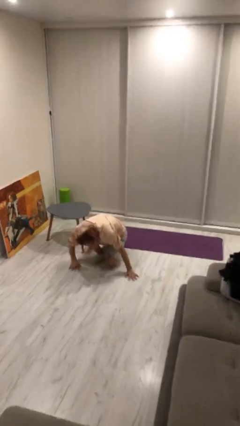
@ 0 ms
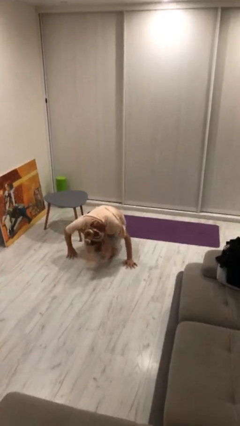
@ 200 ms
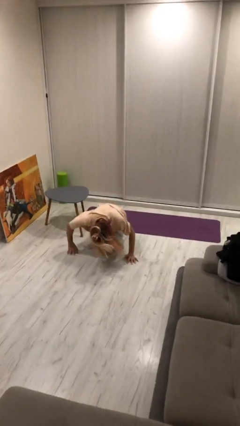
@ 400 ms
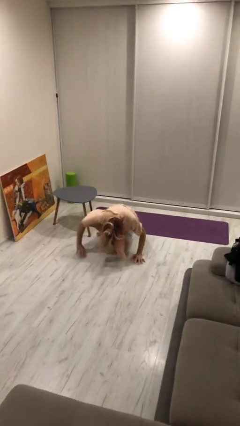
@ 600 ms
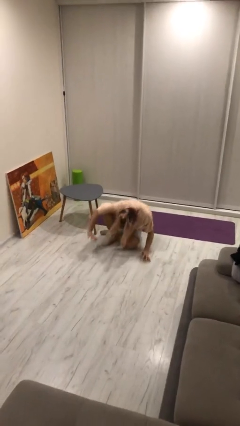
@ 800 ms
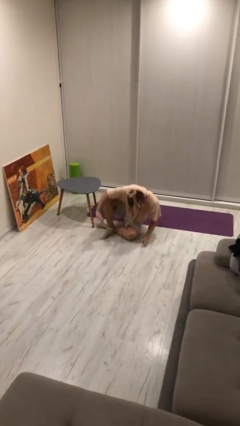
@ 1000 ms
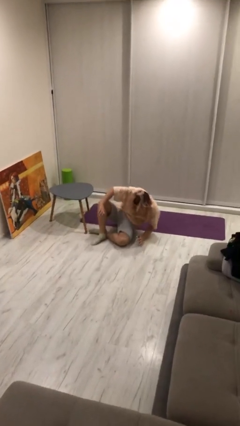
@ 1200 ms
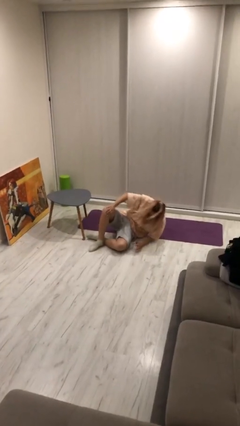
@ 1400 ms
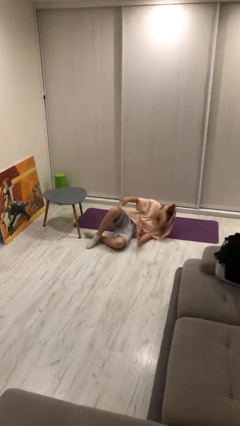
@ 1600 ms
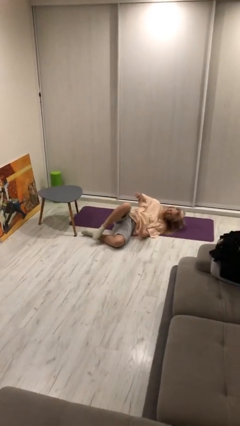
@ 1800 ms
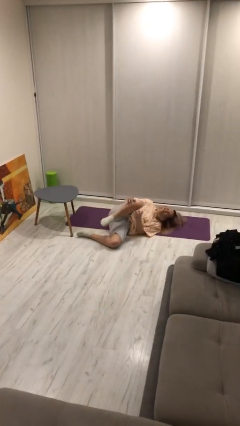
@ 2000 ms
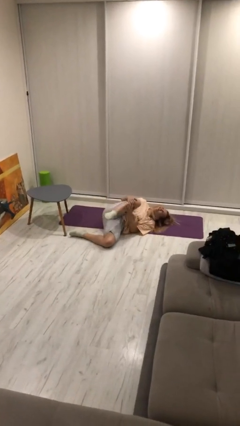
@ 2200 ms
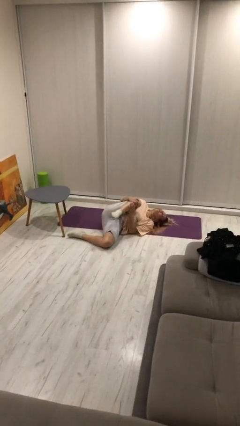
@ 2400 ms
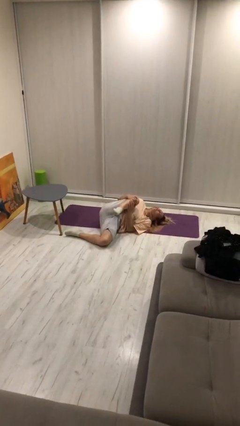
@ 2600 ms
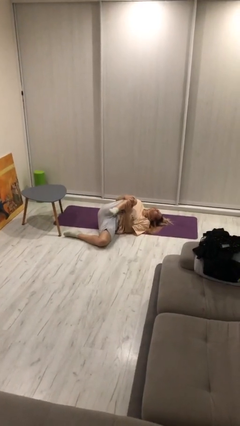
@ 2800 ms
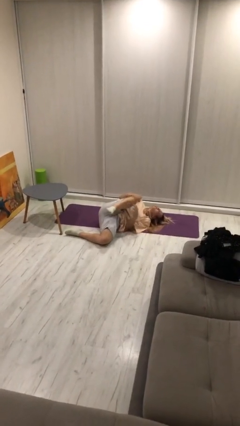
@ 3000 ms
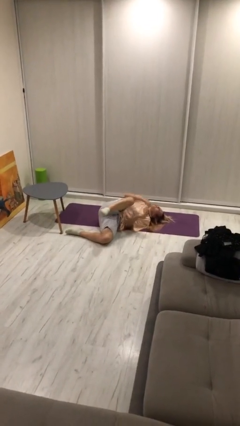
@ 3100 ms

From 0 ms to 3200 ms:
person lies down on floor

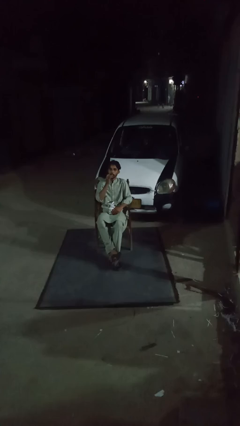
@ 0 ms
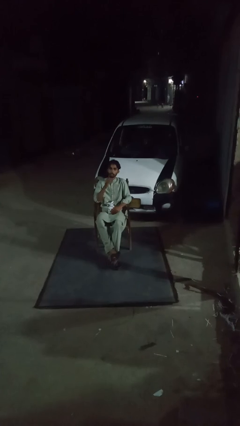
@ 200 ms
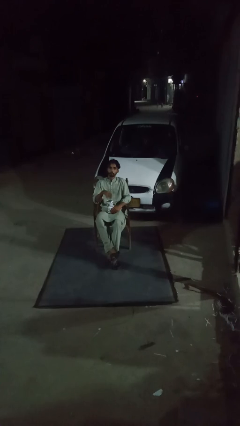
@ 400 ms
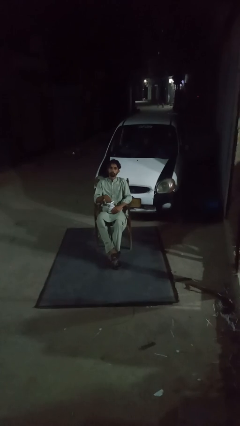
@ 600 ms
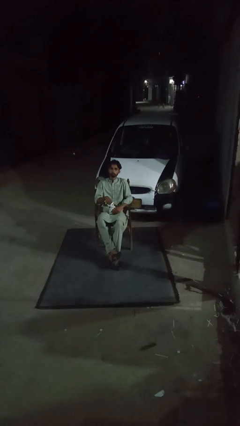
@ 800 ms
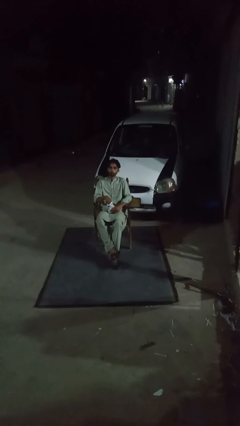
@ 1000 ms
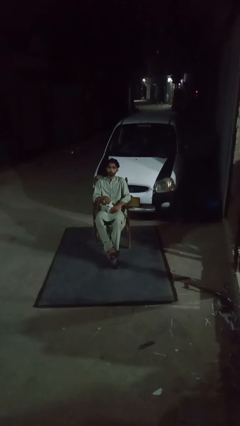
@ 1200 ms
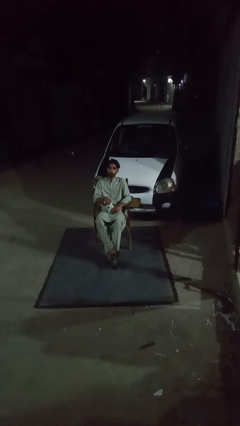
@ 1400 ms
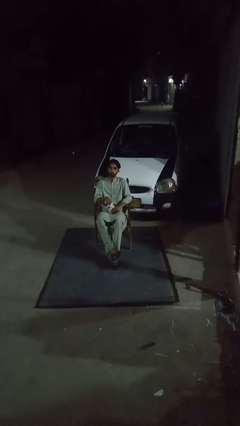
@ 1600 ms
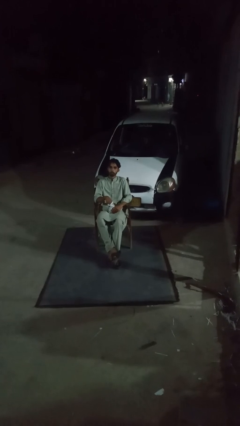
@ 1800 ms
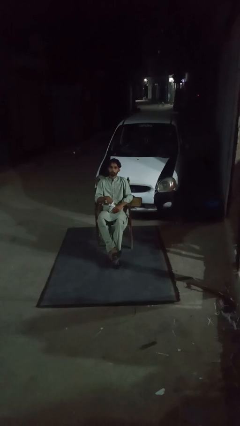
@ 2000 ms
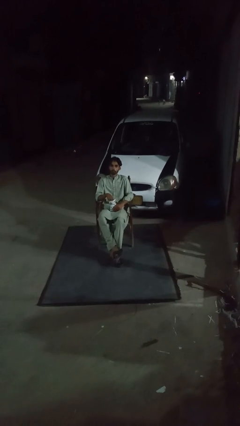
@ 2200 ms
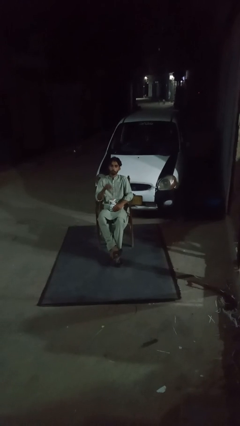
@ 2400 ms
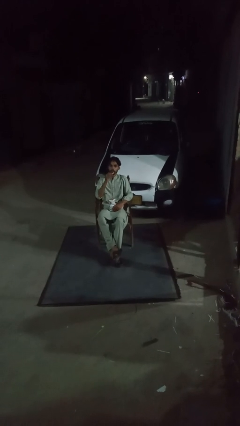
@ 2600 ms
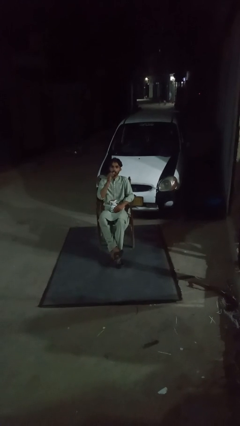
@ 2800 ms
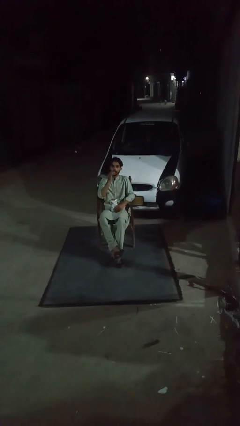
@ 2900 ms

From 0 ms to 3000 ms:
person eats snack from bag

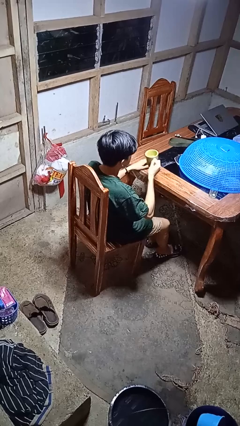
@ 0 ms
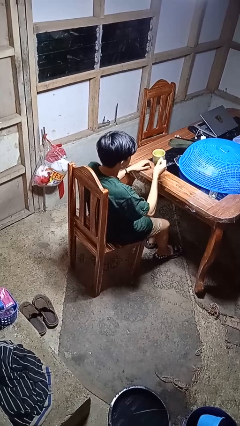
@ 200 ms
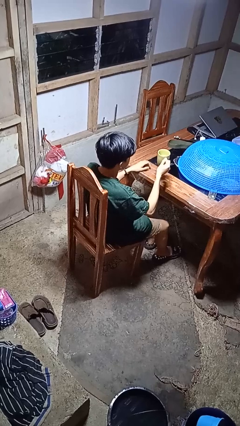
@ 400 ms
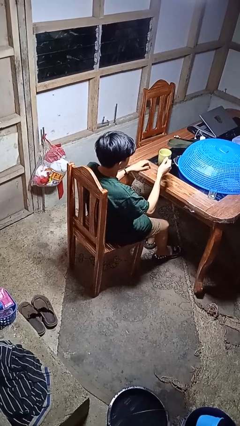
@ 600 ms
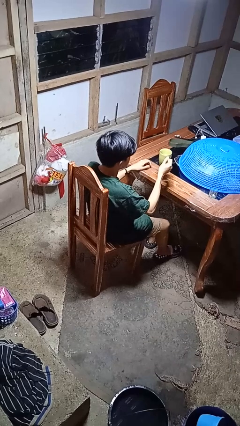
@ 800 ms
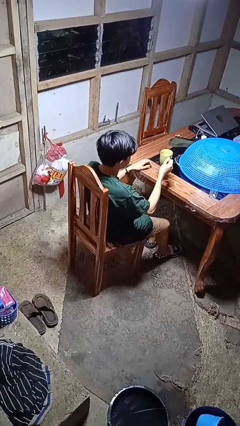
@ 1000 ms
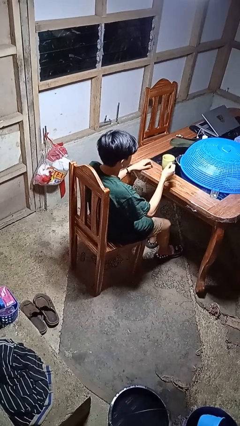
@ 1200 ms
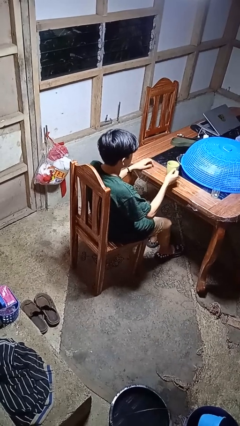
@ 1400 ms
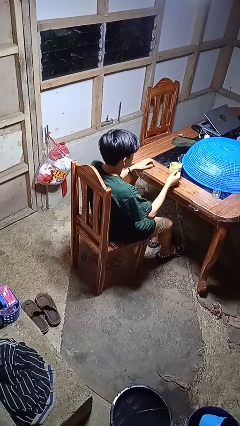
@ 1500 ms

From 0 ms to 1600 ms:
person puts down object on table

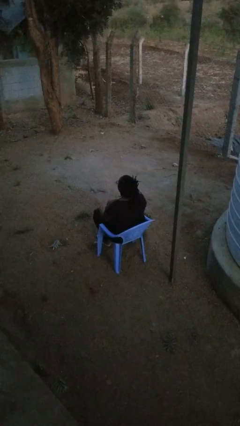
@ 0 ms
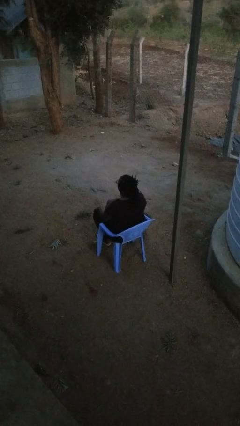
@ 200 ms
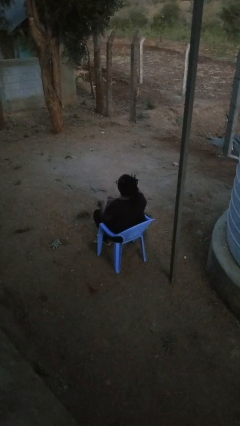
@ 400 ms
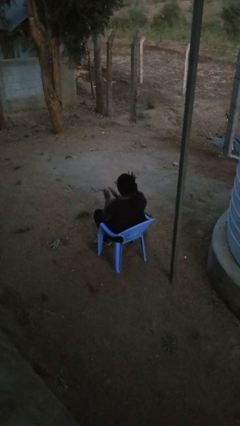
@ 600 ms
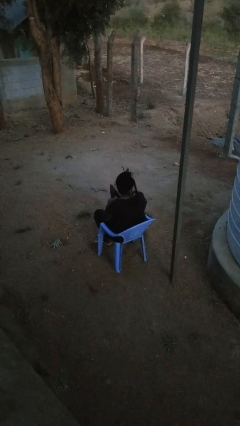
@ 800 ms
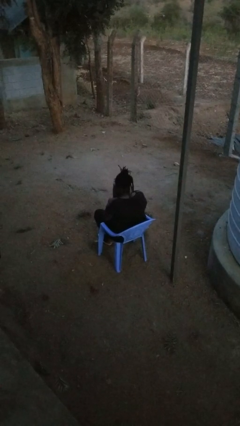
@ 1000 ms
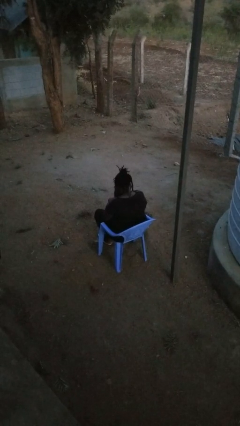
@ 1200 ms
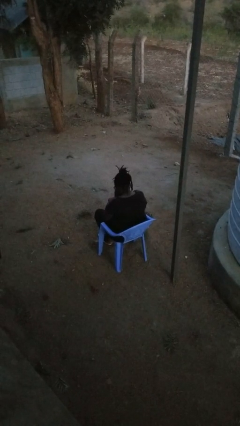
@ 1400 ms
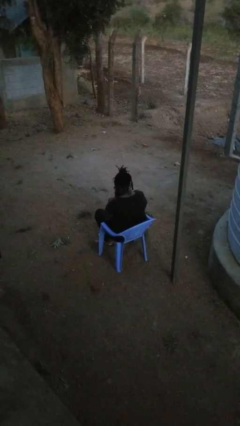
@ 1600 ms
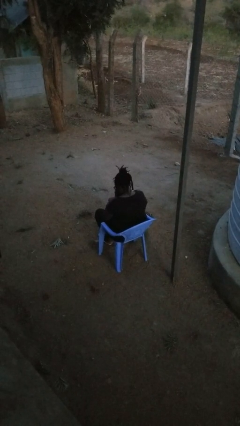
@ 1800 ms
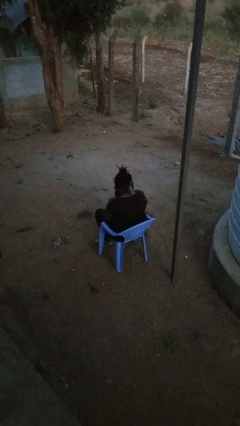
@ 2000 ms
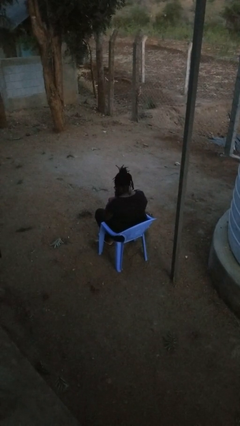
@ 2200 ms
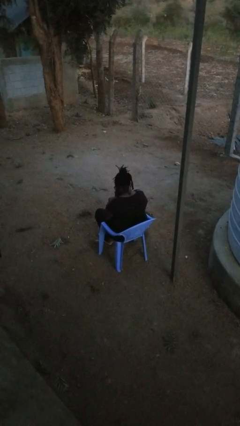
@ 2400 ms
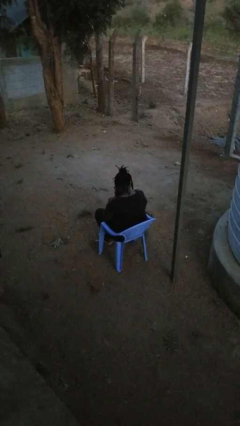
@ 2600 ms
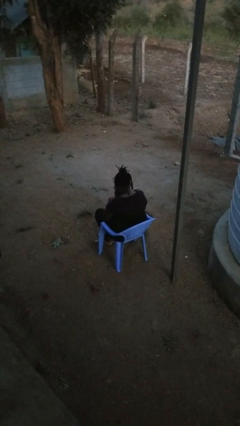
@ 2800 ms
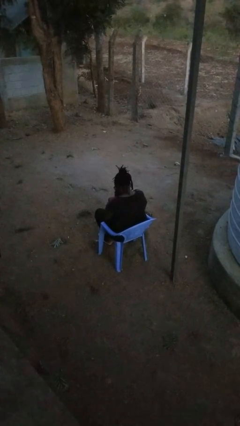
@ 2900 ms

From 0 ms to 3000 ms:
person prays

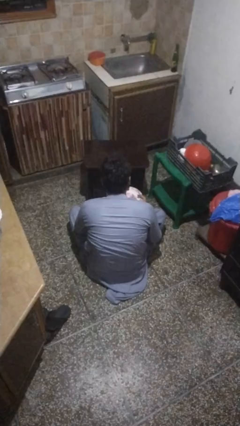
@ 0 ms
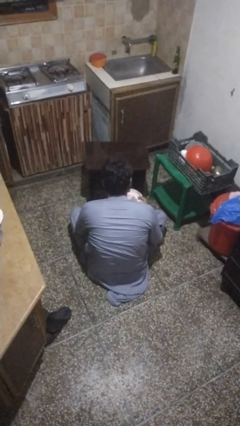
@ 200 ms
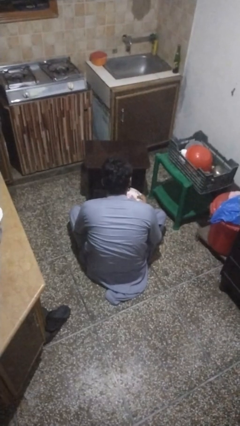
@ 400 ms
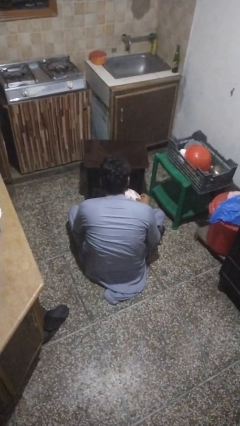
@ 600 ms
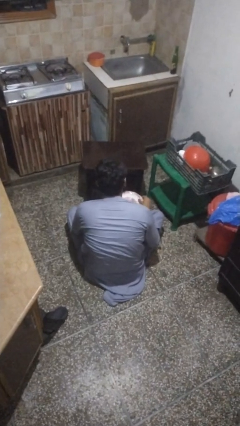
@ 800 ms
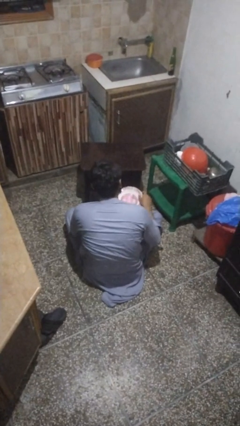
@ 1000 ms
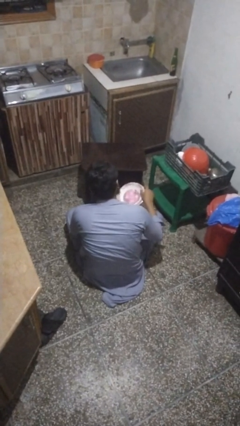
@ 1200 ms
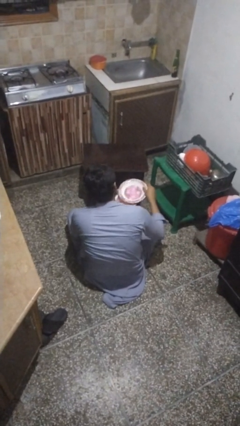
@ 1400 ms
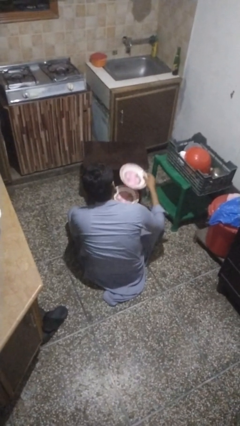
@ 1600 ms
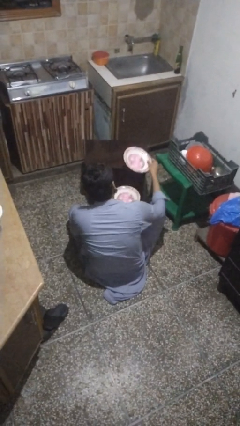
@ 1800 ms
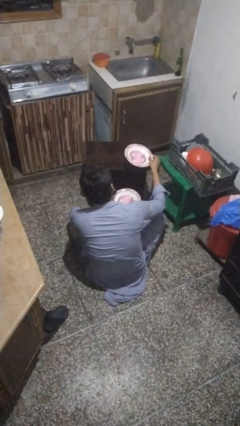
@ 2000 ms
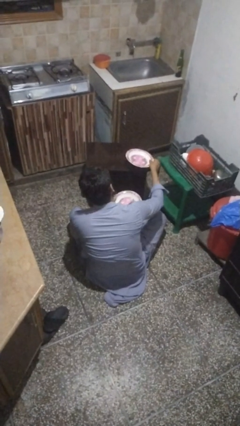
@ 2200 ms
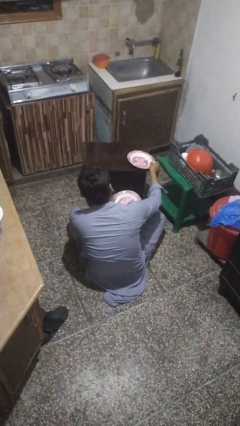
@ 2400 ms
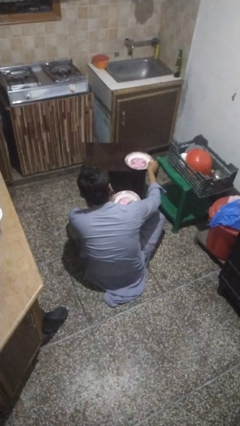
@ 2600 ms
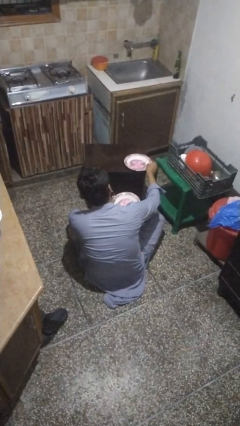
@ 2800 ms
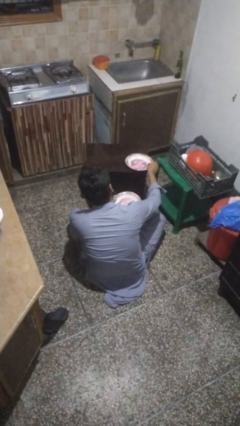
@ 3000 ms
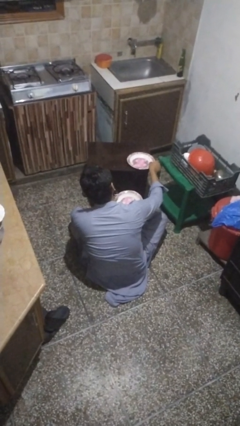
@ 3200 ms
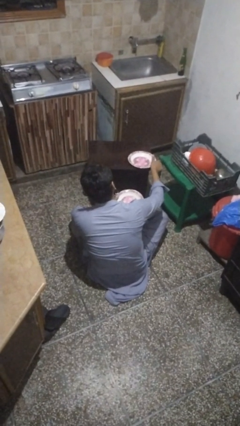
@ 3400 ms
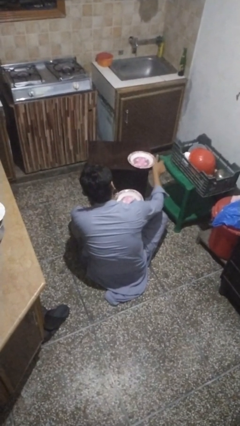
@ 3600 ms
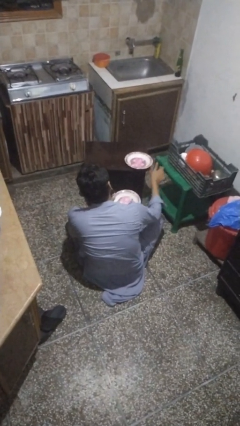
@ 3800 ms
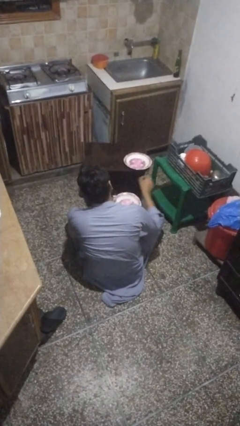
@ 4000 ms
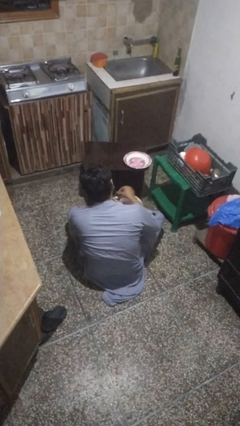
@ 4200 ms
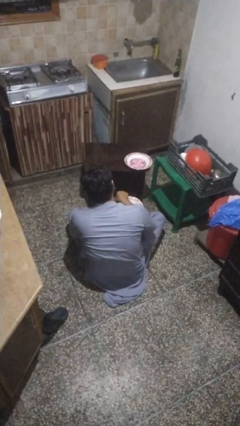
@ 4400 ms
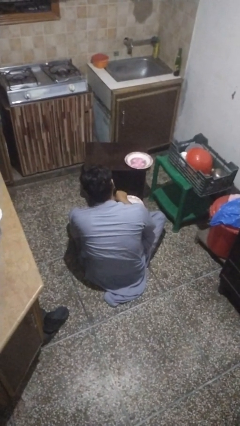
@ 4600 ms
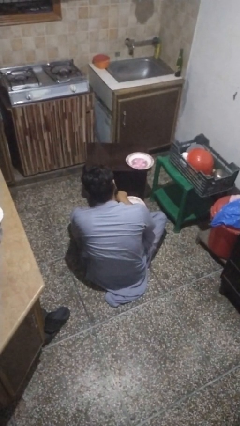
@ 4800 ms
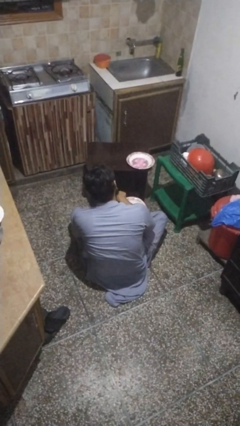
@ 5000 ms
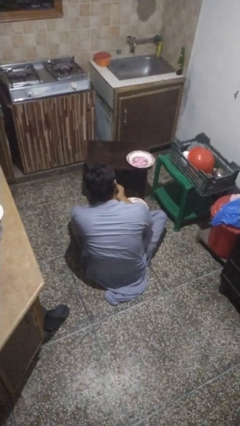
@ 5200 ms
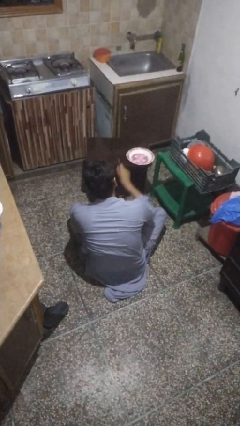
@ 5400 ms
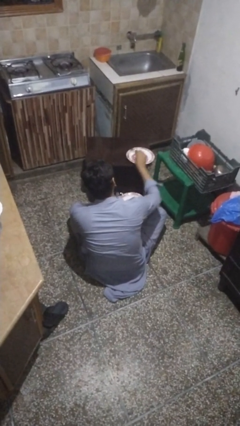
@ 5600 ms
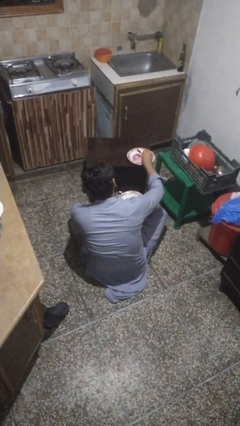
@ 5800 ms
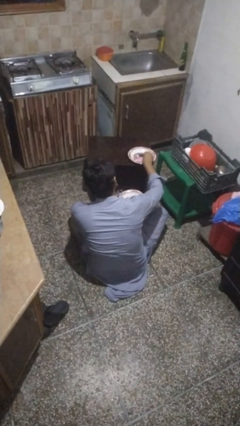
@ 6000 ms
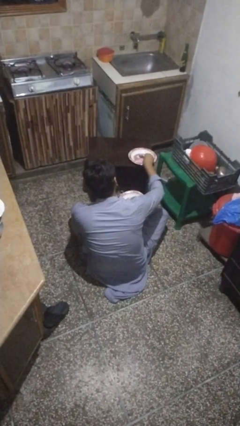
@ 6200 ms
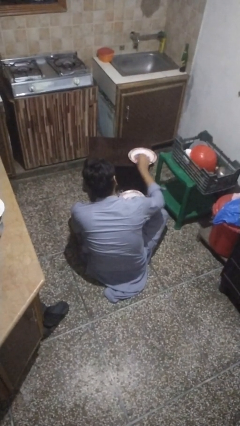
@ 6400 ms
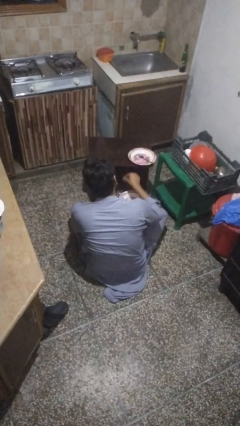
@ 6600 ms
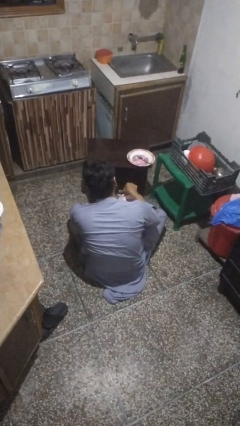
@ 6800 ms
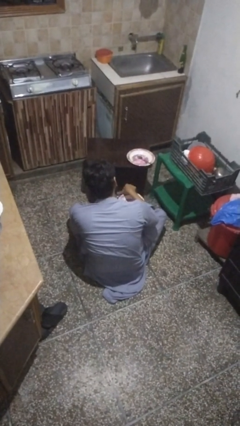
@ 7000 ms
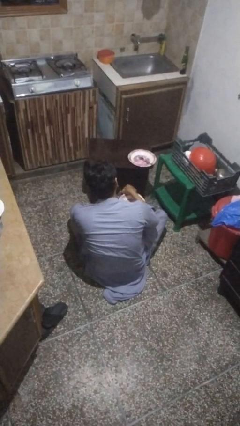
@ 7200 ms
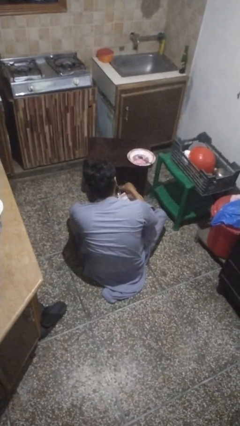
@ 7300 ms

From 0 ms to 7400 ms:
person sets table
